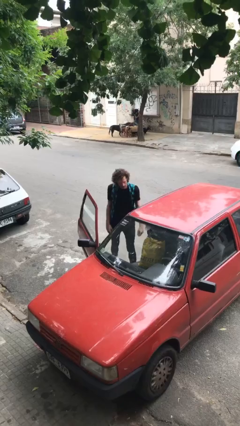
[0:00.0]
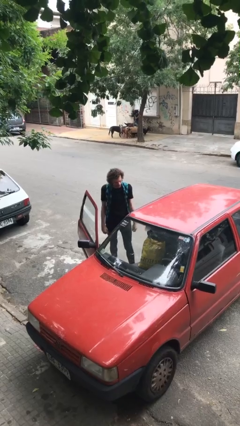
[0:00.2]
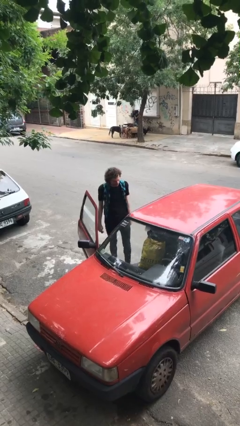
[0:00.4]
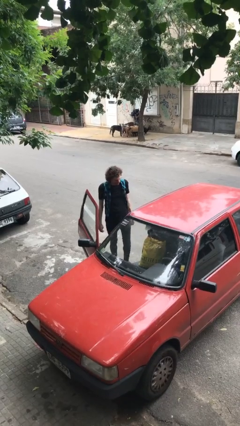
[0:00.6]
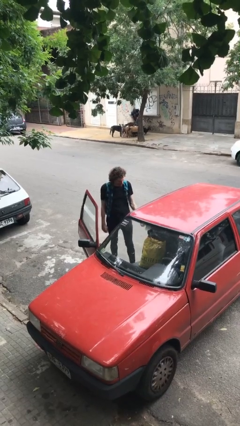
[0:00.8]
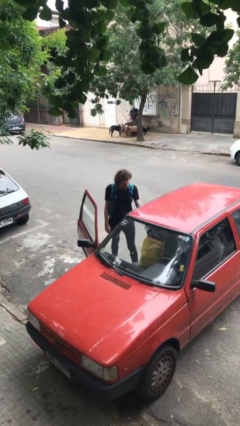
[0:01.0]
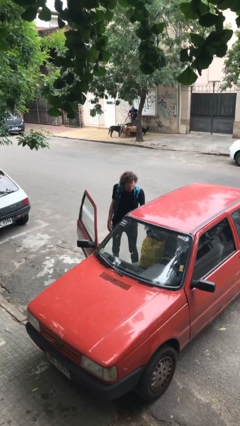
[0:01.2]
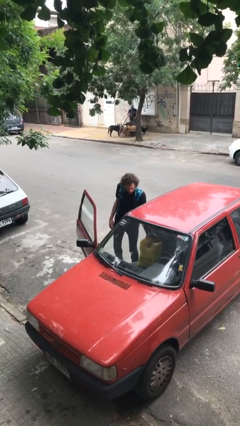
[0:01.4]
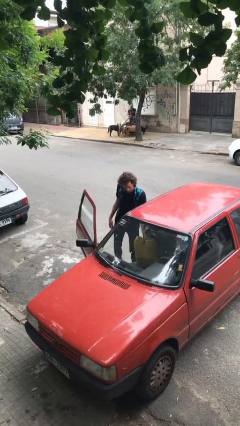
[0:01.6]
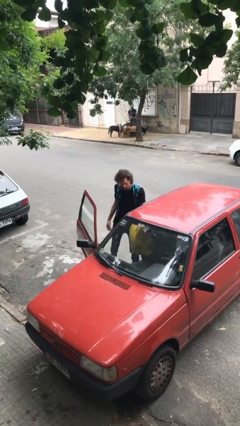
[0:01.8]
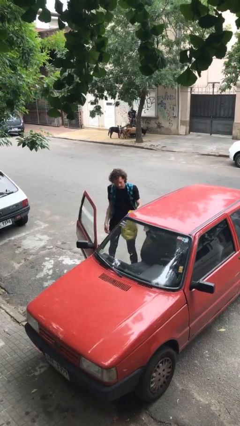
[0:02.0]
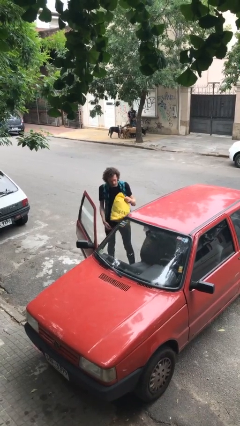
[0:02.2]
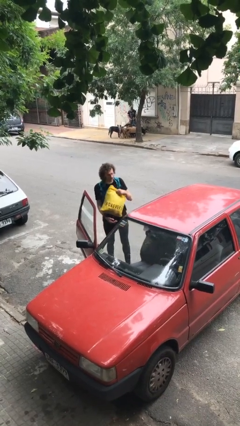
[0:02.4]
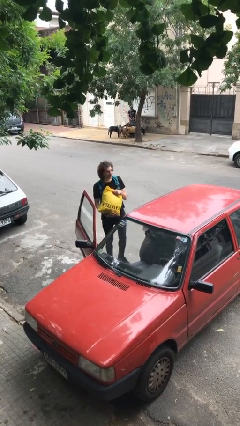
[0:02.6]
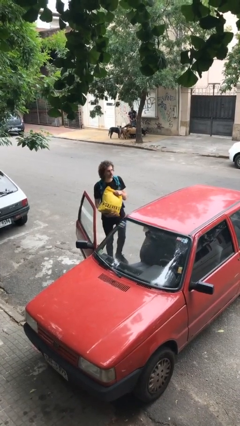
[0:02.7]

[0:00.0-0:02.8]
person unloads car

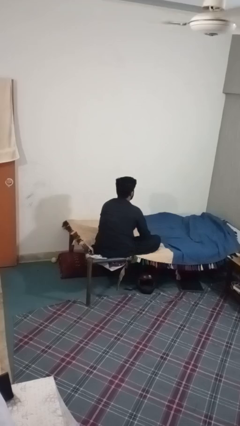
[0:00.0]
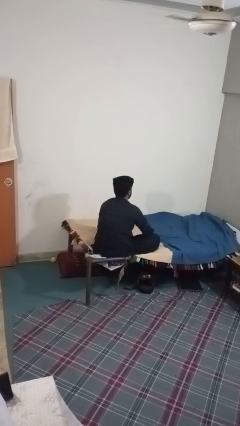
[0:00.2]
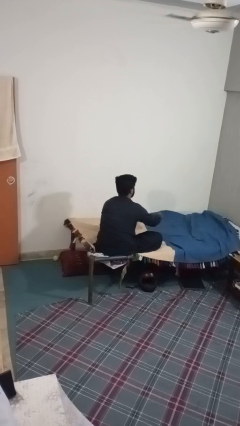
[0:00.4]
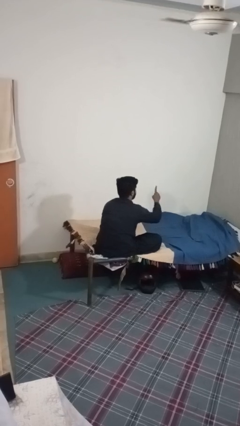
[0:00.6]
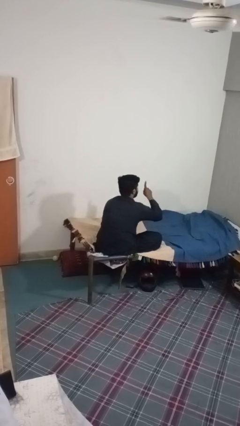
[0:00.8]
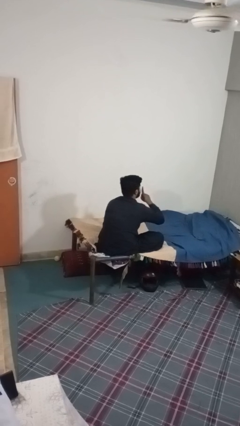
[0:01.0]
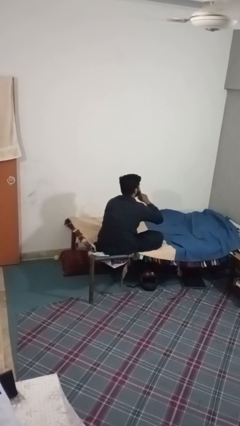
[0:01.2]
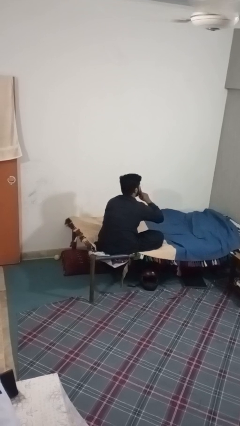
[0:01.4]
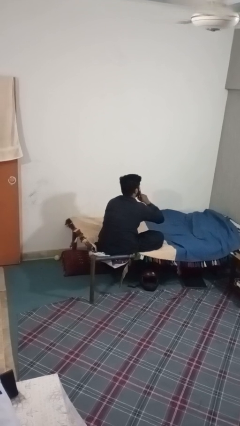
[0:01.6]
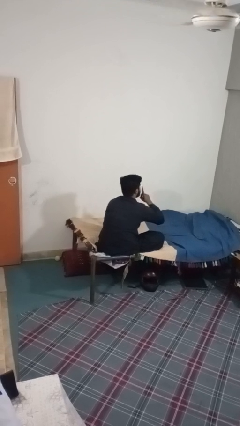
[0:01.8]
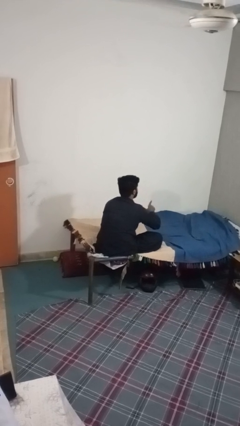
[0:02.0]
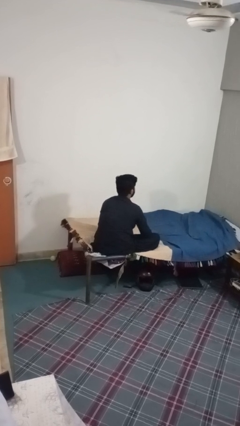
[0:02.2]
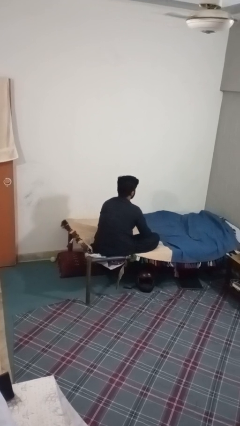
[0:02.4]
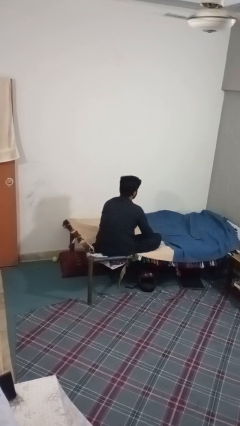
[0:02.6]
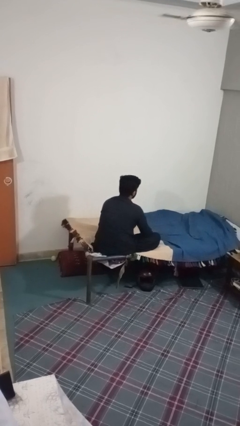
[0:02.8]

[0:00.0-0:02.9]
person gestures be quiet

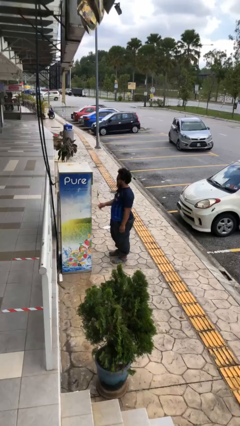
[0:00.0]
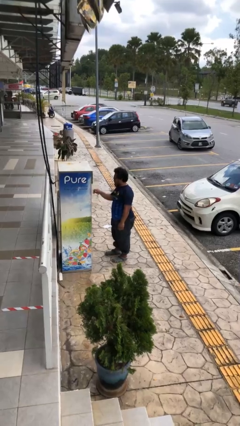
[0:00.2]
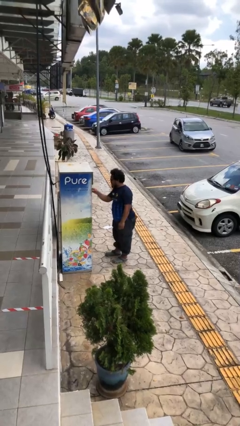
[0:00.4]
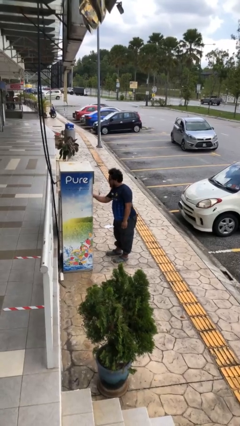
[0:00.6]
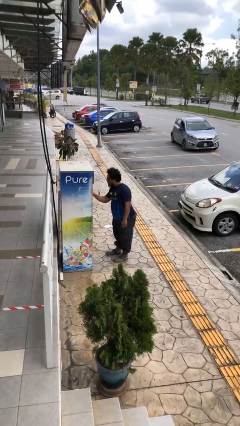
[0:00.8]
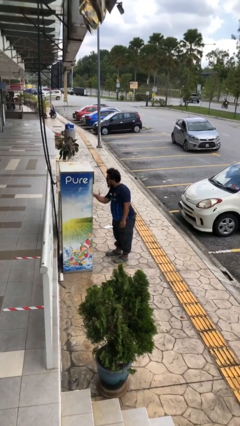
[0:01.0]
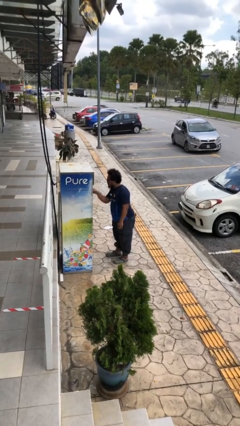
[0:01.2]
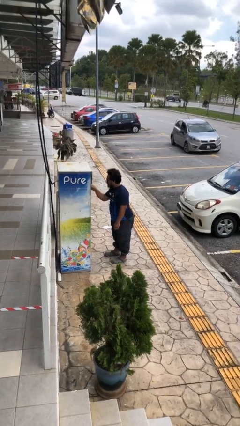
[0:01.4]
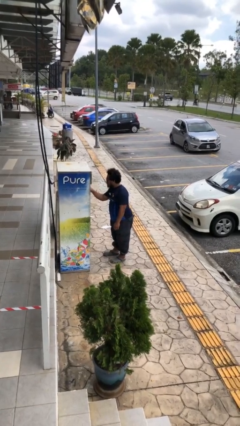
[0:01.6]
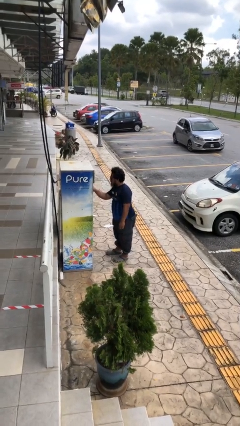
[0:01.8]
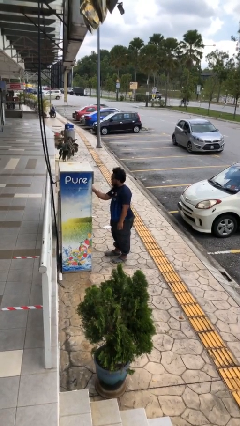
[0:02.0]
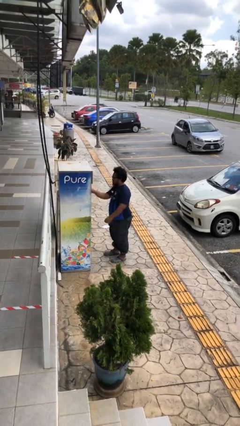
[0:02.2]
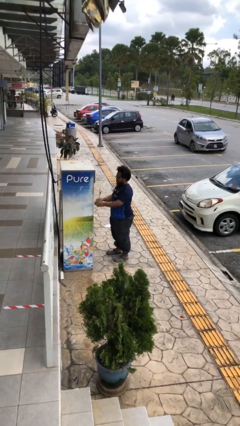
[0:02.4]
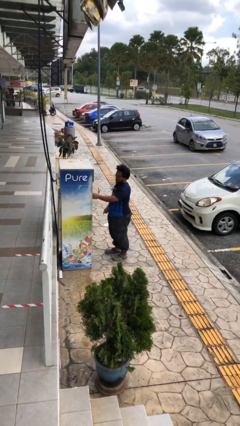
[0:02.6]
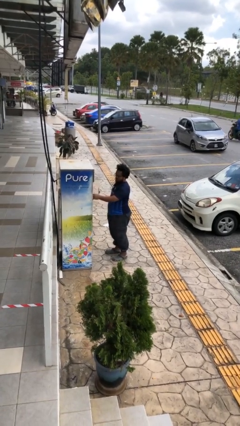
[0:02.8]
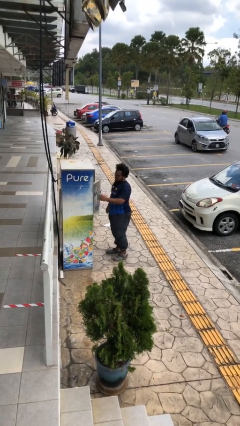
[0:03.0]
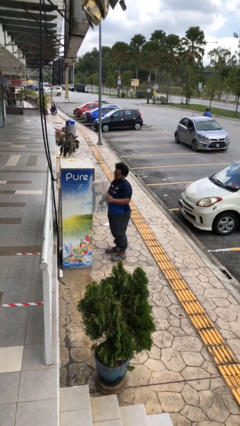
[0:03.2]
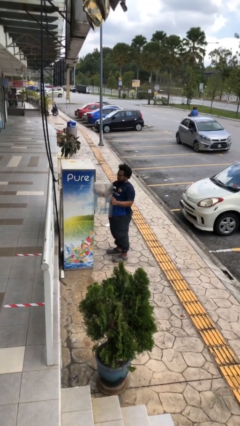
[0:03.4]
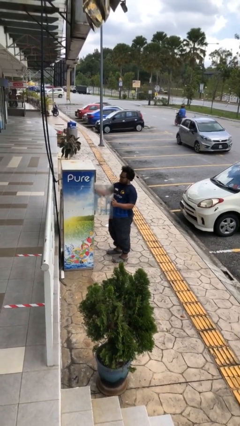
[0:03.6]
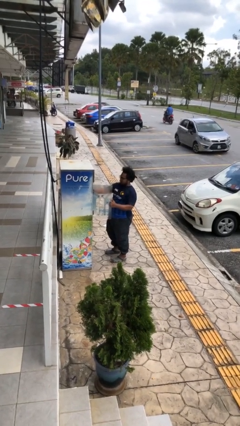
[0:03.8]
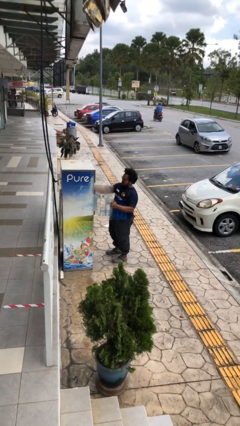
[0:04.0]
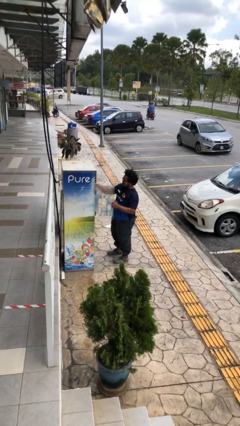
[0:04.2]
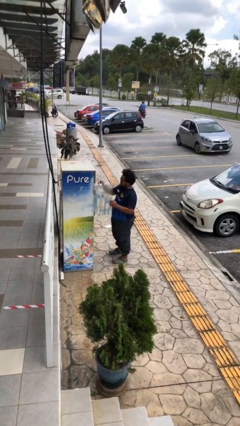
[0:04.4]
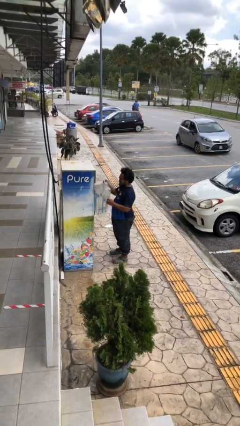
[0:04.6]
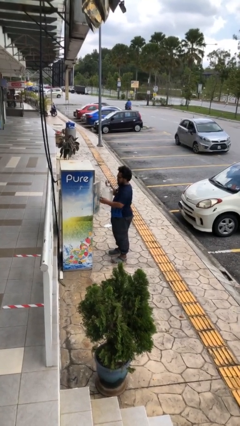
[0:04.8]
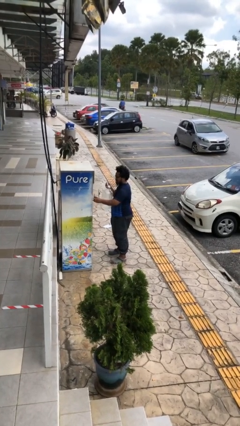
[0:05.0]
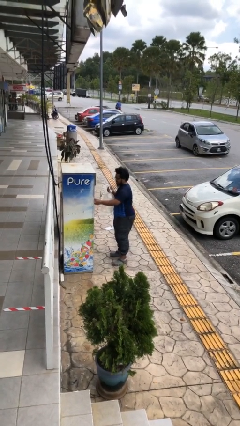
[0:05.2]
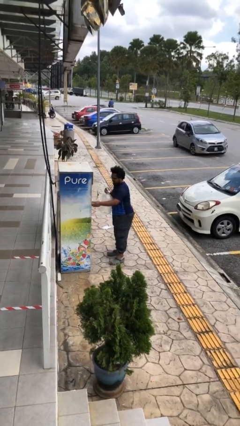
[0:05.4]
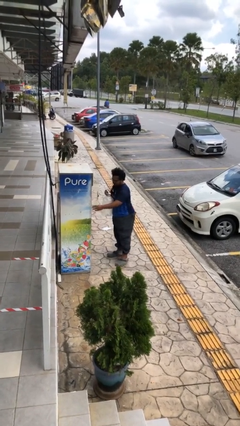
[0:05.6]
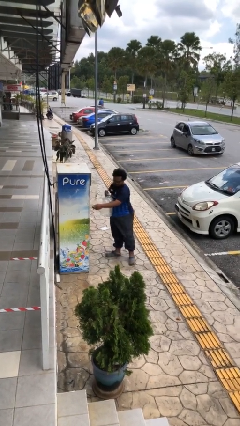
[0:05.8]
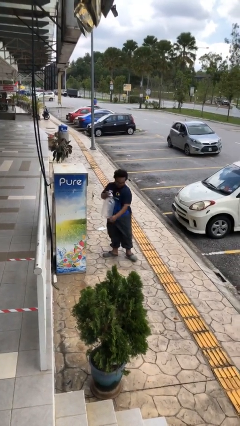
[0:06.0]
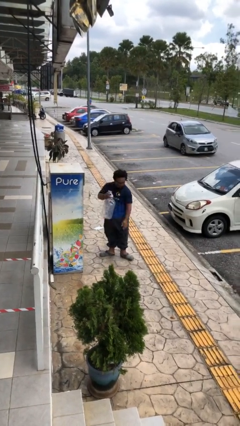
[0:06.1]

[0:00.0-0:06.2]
person purchases from machine

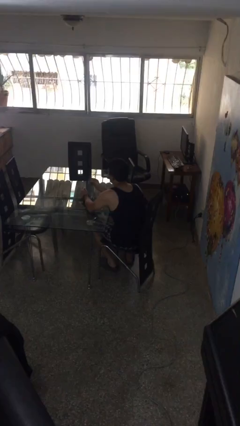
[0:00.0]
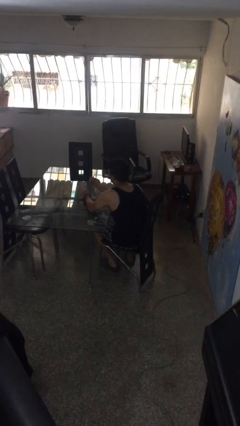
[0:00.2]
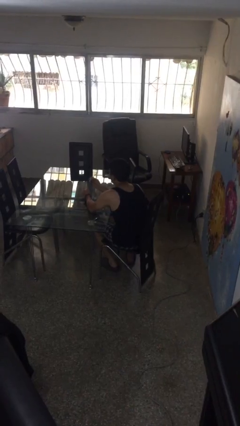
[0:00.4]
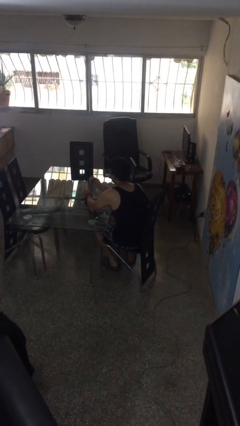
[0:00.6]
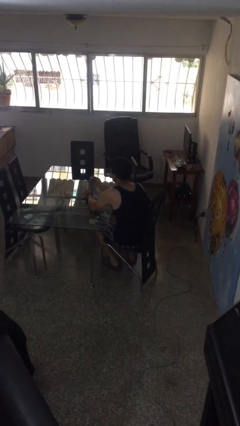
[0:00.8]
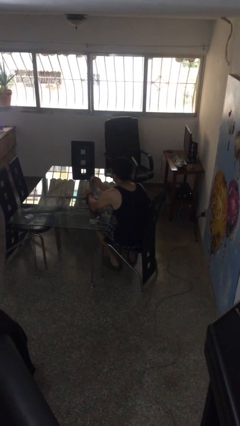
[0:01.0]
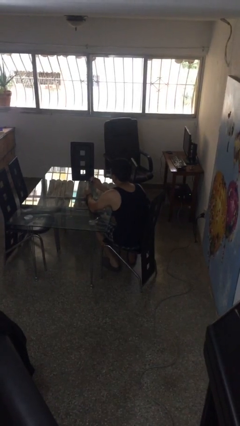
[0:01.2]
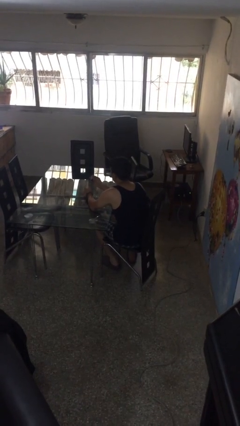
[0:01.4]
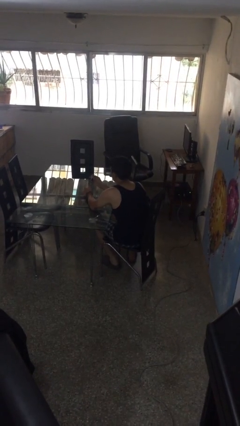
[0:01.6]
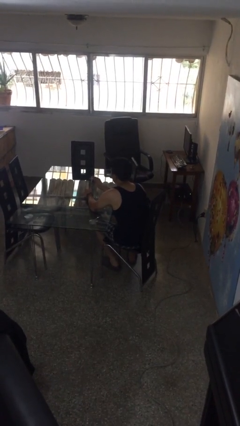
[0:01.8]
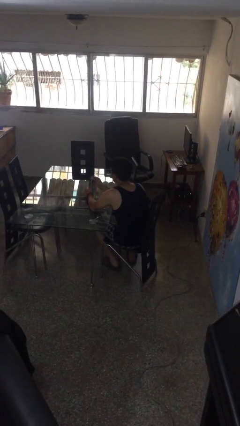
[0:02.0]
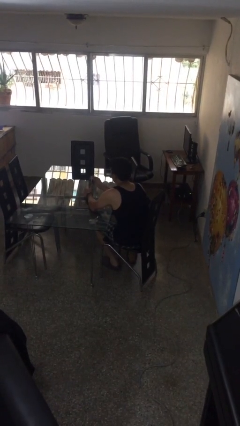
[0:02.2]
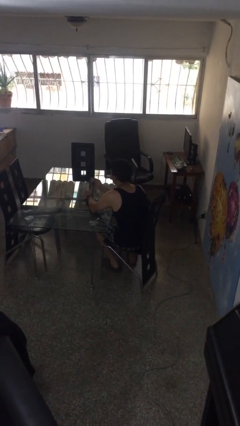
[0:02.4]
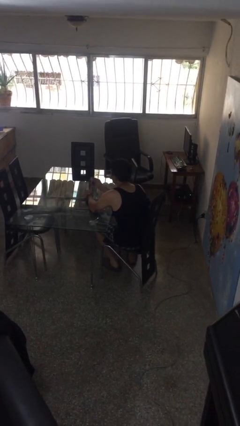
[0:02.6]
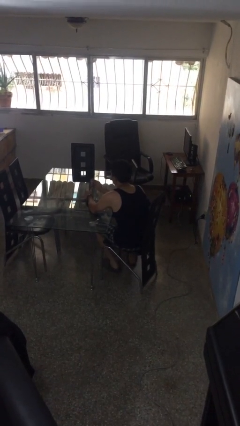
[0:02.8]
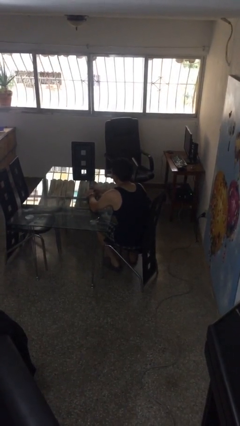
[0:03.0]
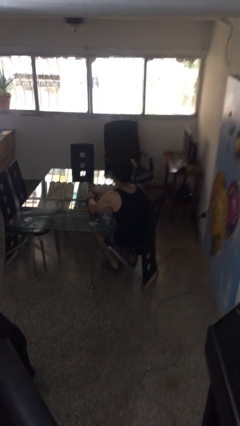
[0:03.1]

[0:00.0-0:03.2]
person clips fingernails

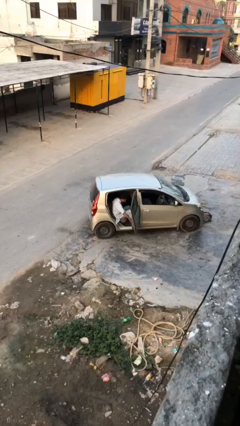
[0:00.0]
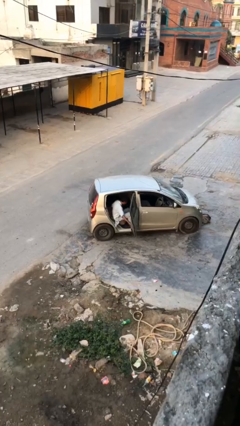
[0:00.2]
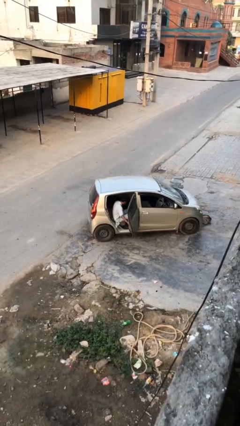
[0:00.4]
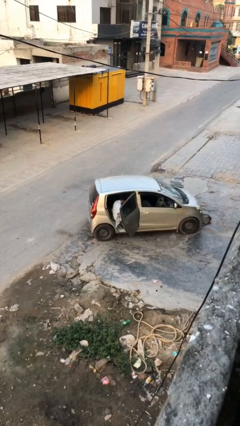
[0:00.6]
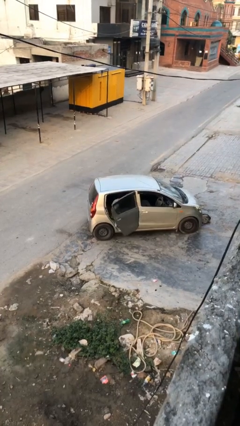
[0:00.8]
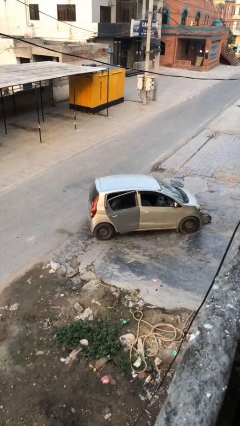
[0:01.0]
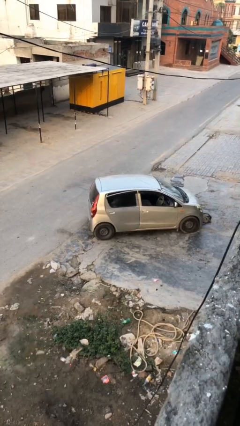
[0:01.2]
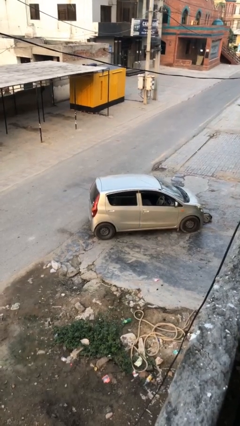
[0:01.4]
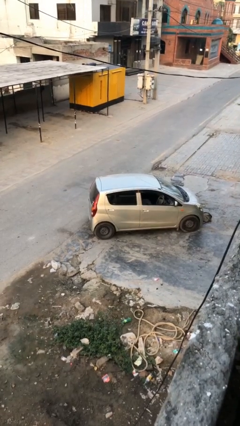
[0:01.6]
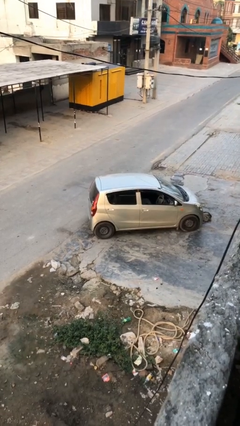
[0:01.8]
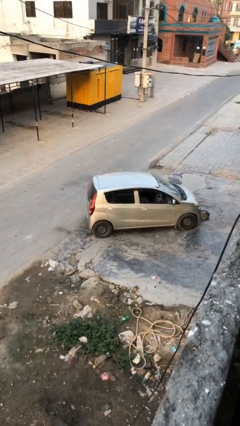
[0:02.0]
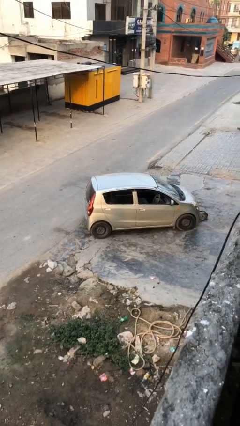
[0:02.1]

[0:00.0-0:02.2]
person closes car door
